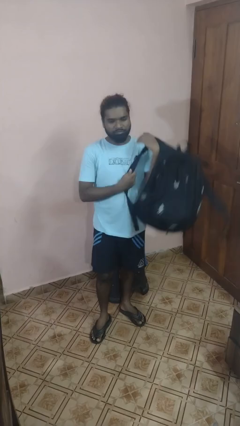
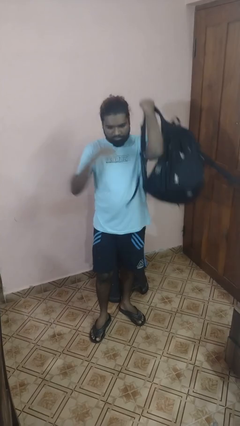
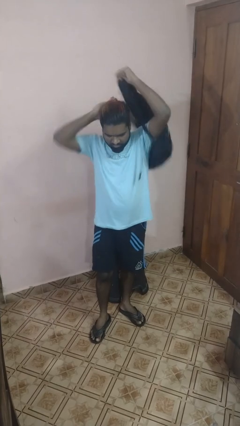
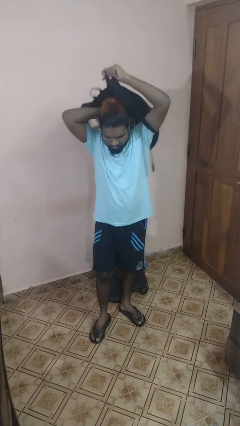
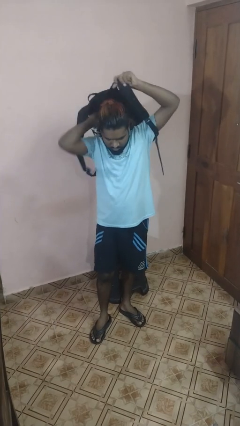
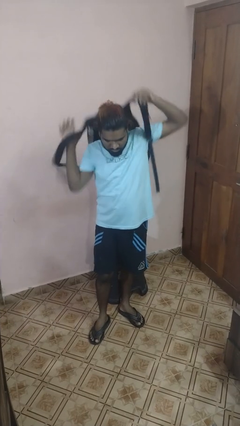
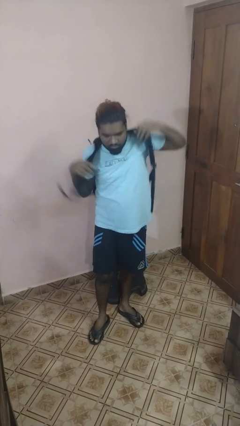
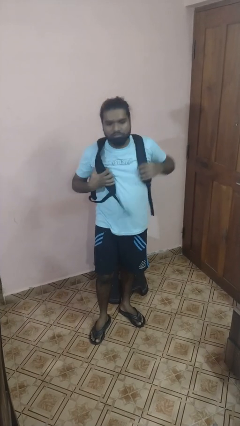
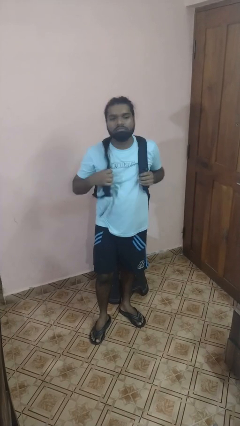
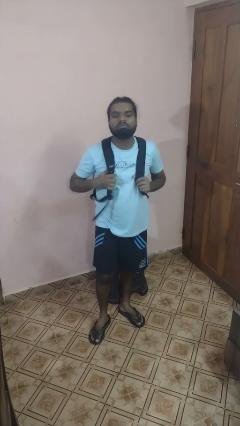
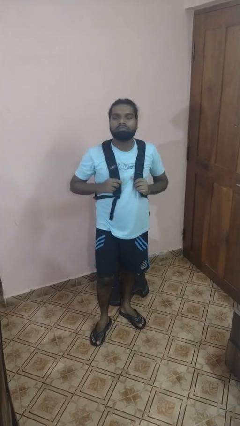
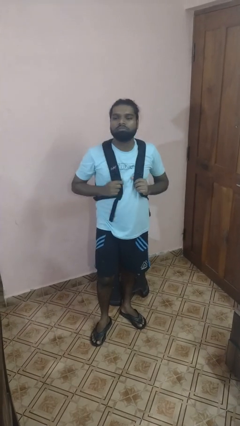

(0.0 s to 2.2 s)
person puts on backpack

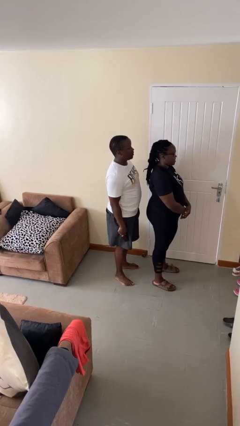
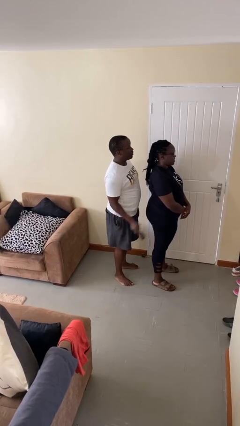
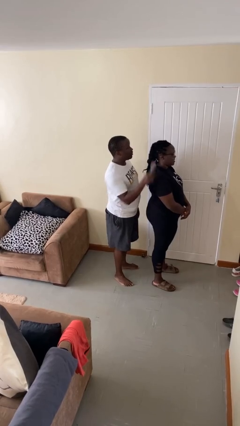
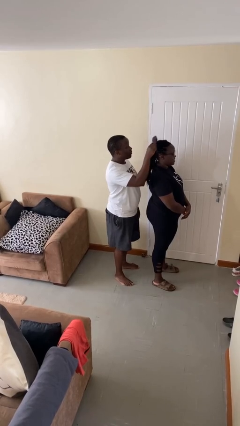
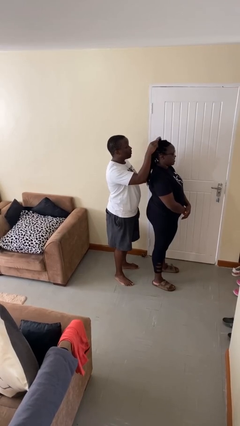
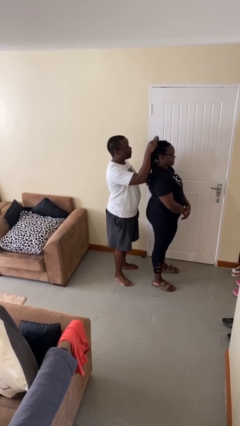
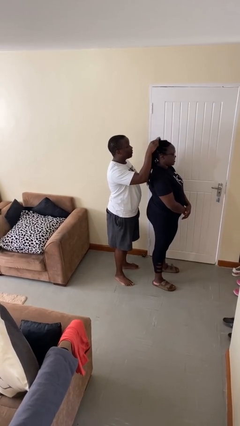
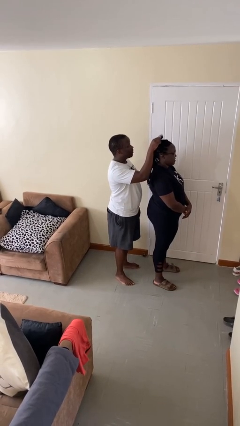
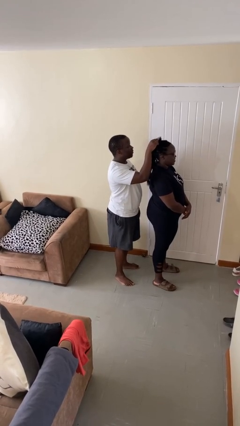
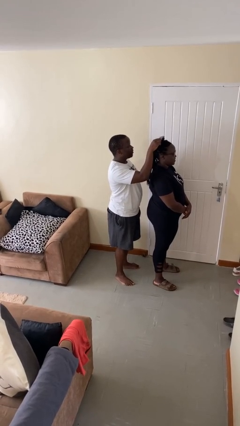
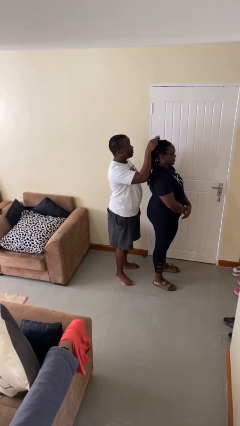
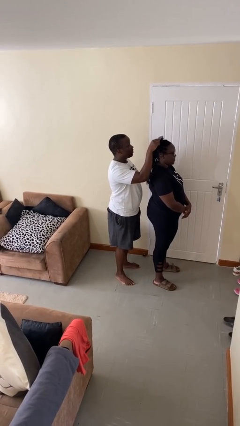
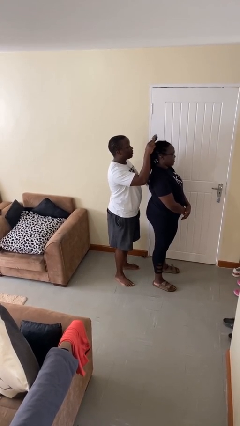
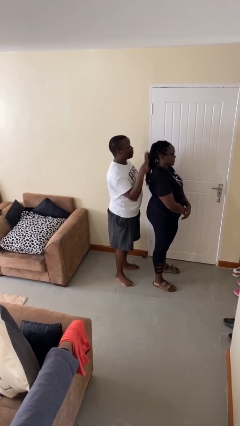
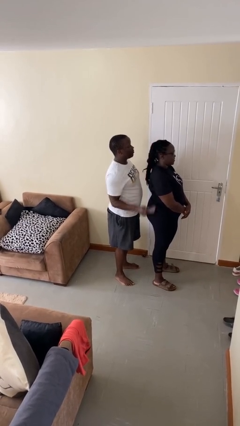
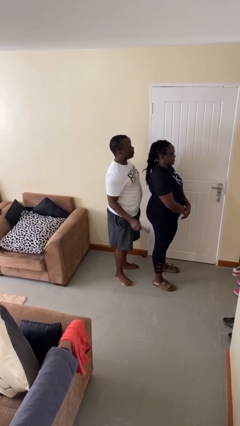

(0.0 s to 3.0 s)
person brushes hair of person

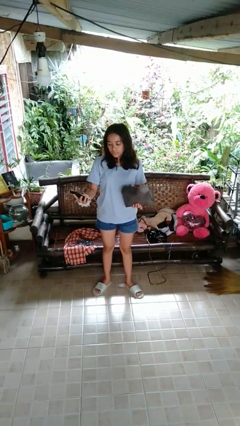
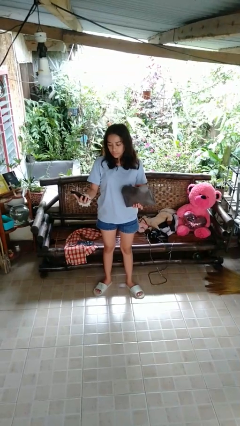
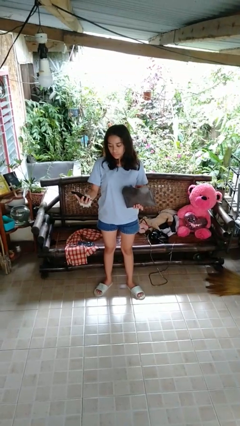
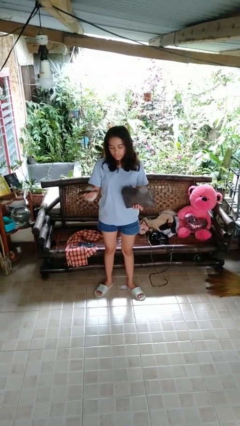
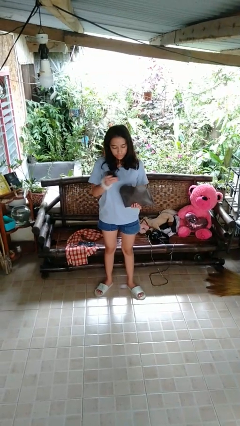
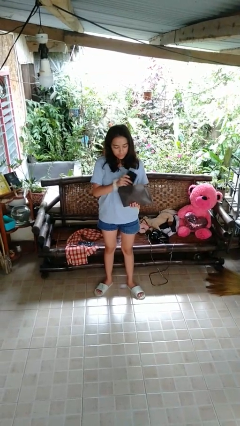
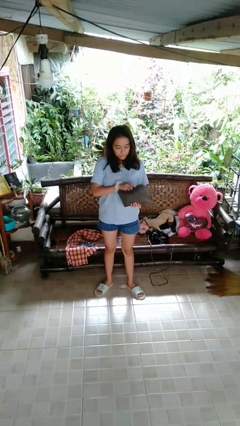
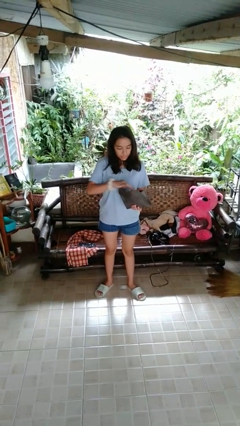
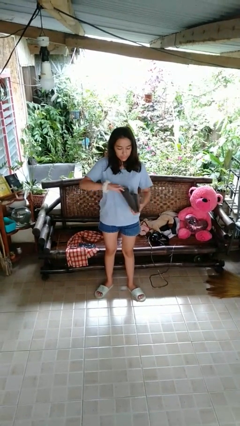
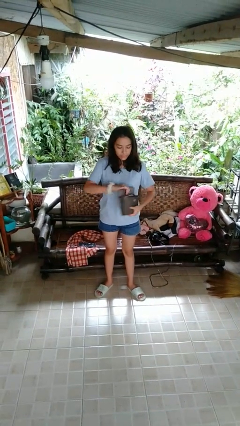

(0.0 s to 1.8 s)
person puts object into purse

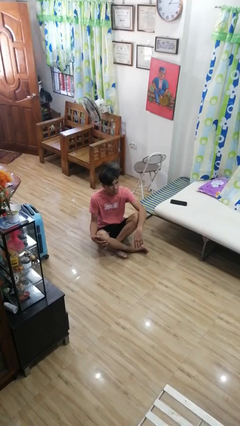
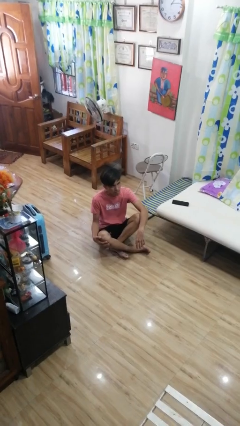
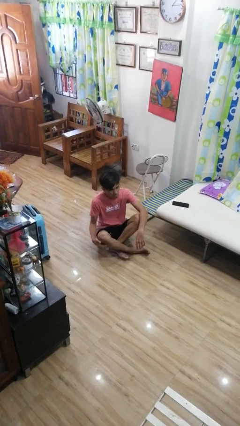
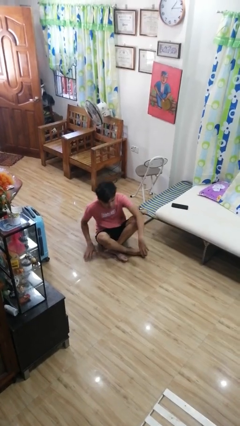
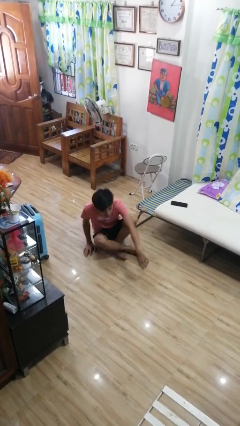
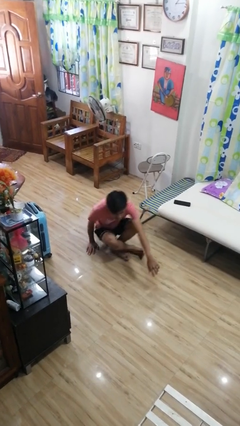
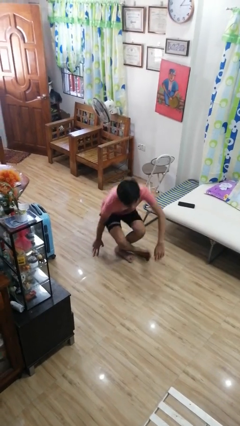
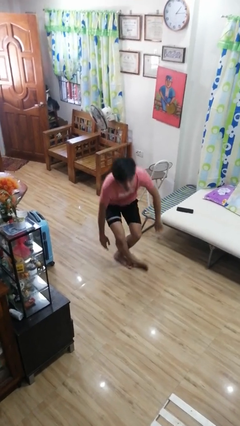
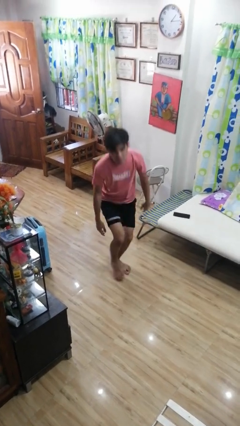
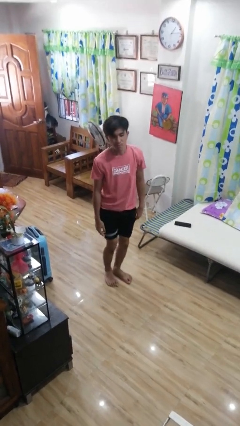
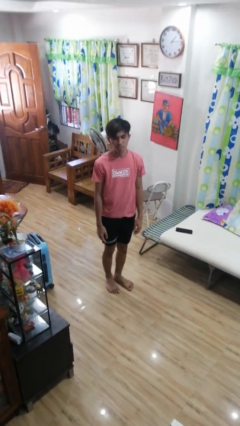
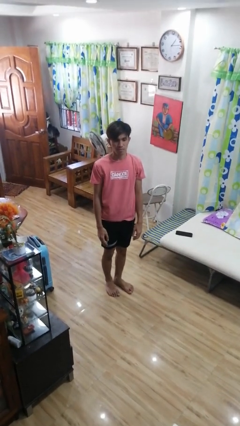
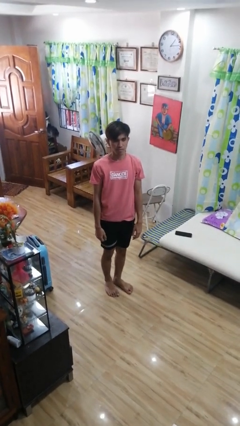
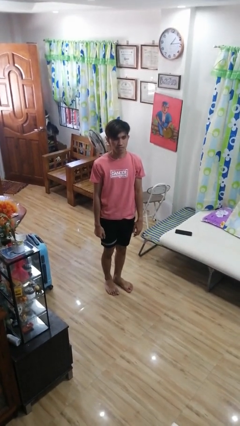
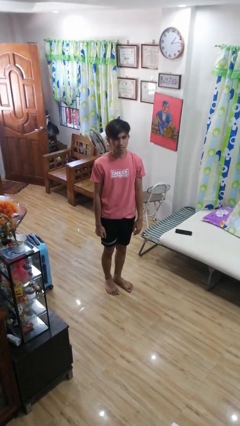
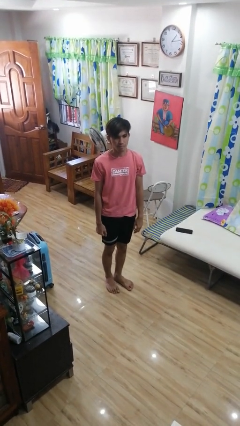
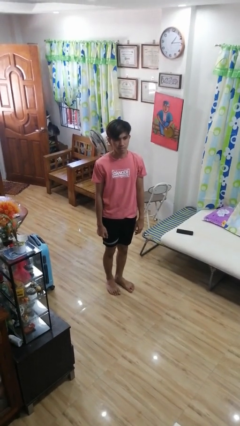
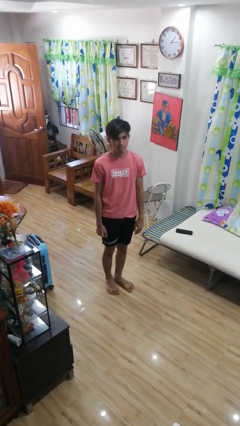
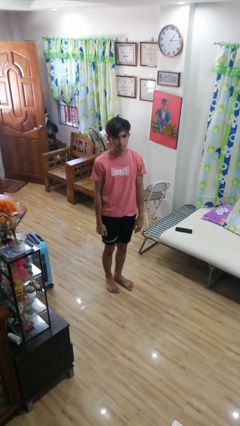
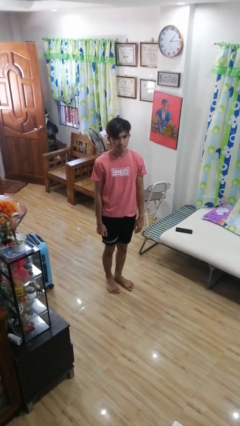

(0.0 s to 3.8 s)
person stands up from floor

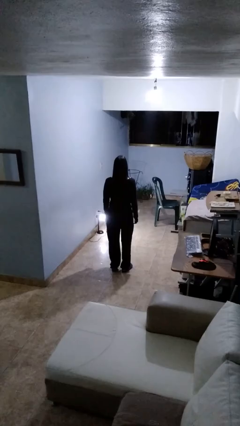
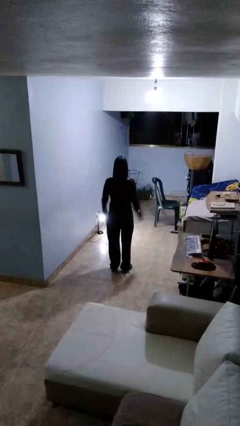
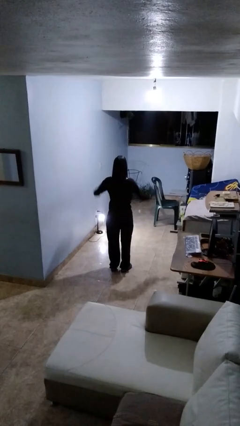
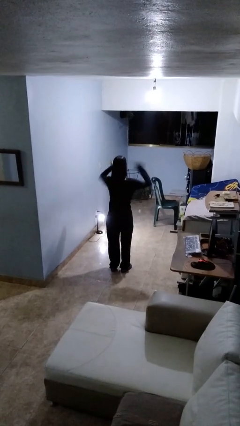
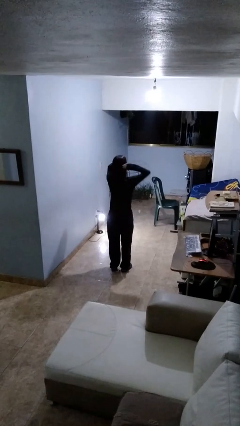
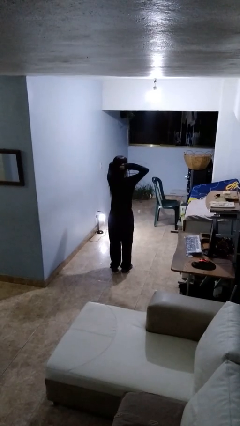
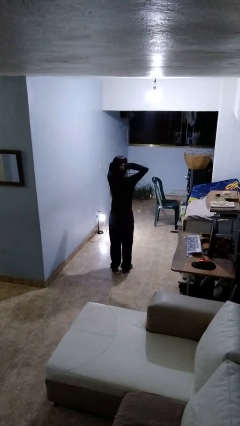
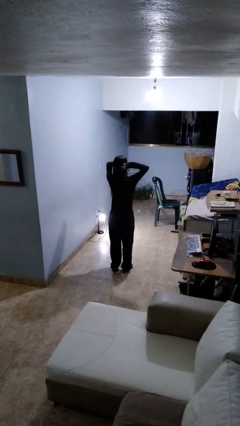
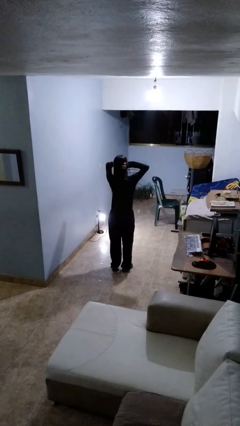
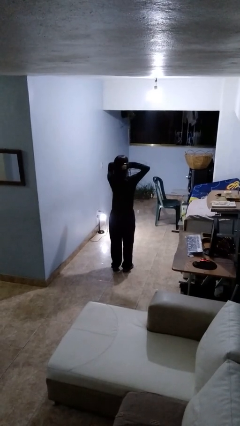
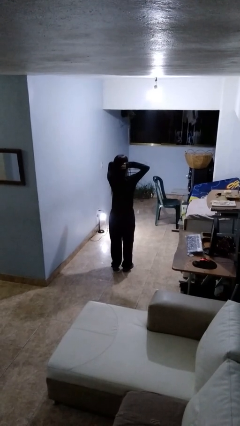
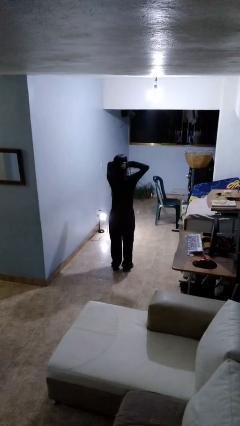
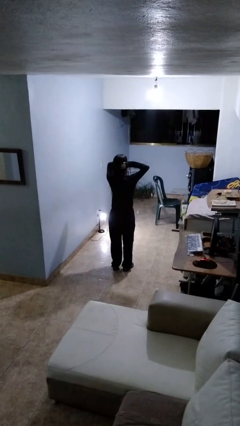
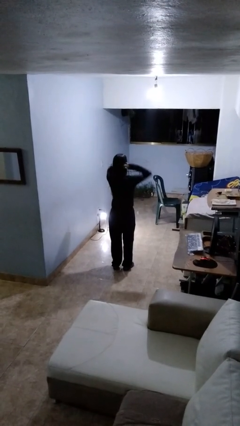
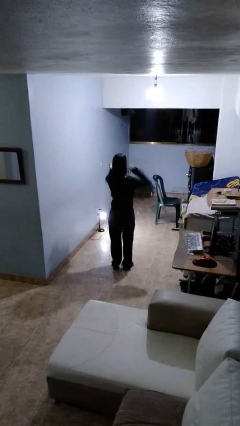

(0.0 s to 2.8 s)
person puts fingers in ear

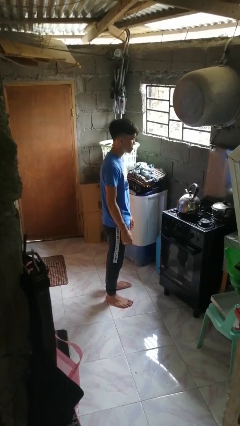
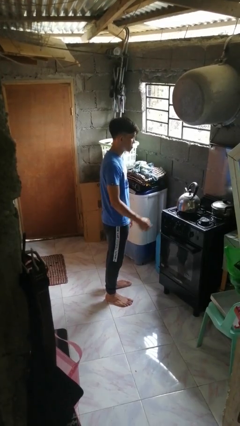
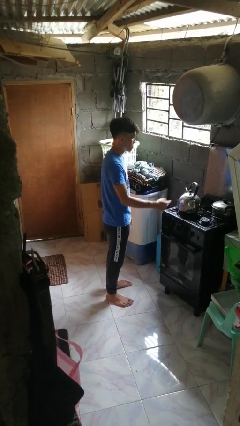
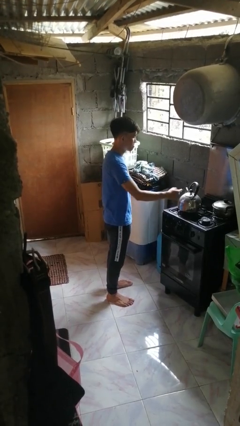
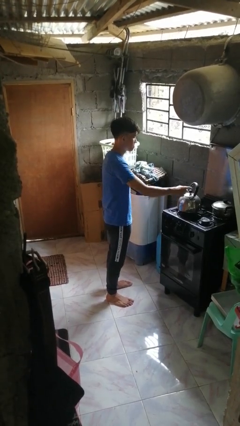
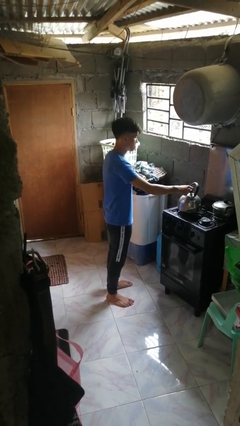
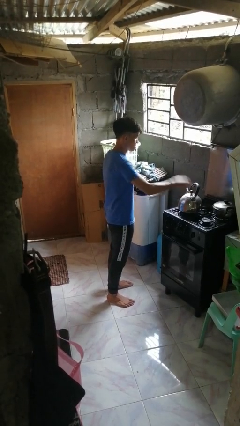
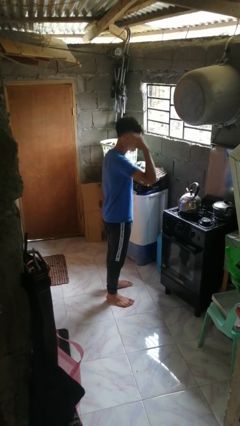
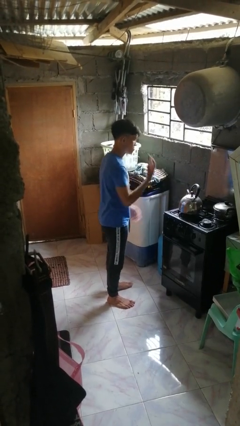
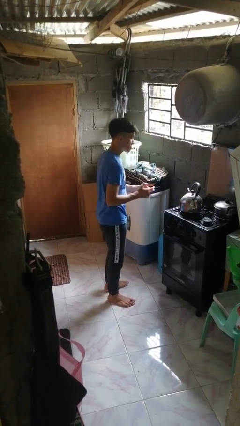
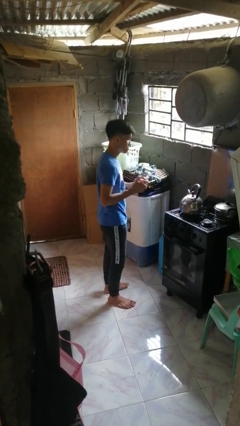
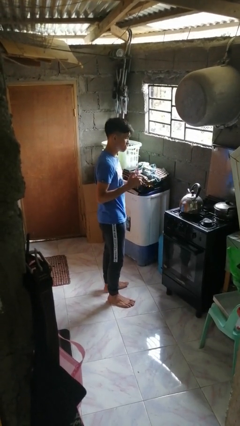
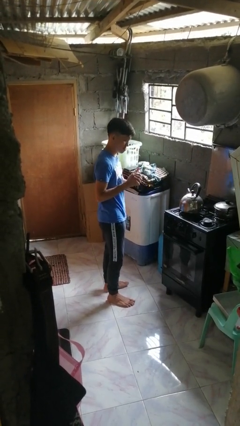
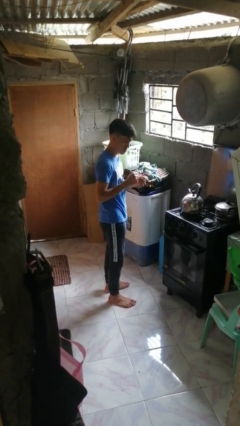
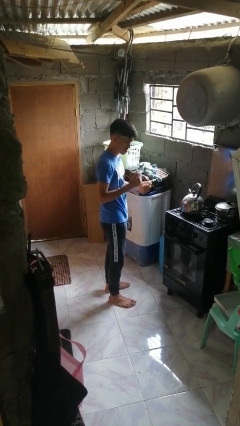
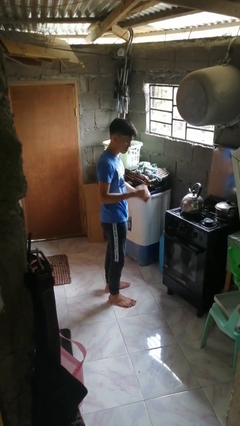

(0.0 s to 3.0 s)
person burns hand

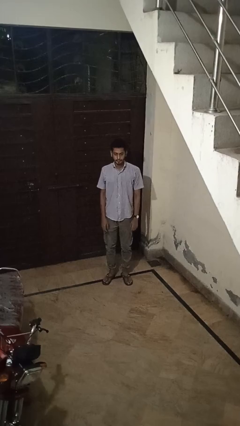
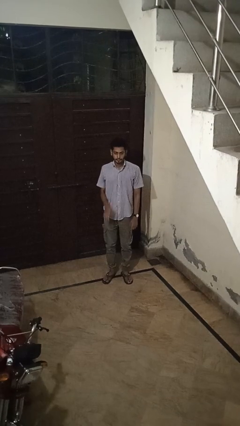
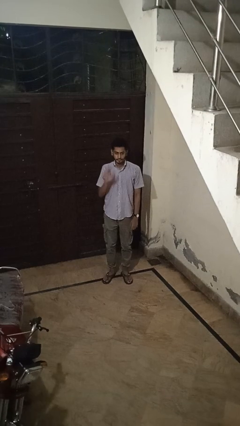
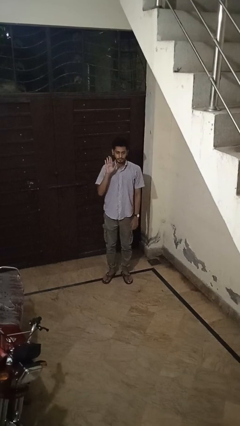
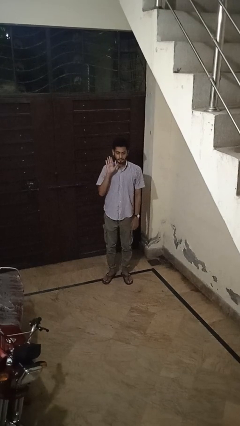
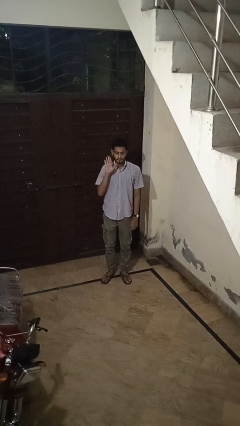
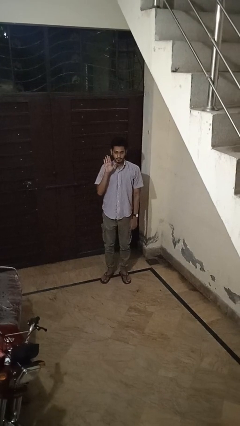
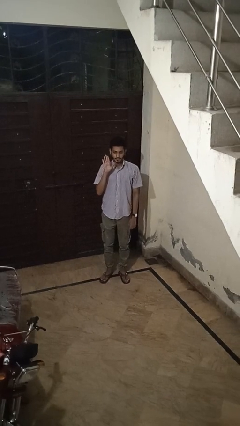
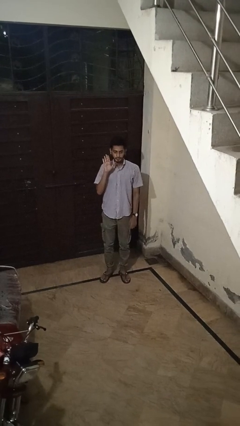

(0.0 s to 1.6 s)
person gestures raise hand
